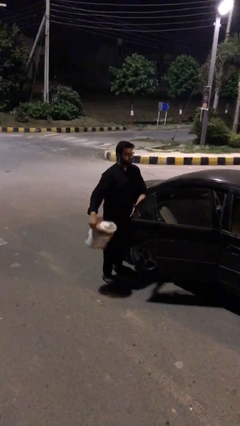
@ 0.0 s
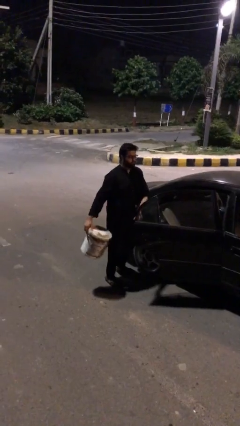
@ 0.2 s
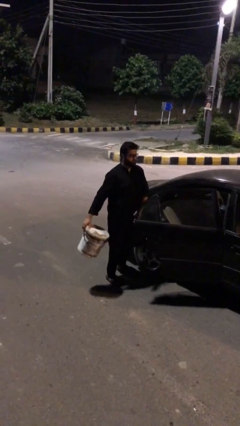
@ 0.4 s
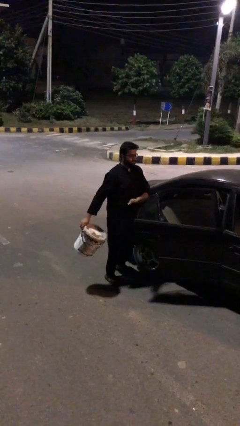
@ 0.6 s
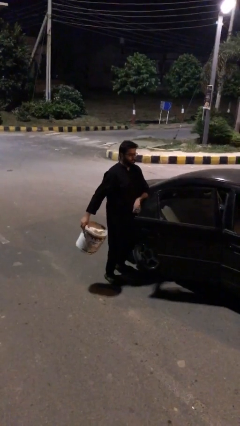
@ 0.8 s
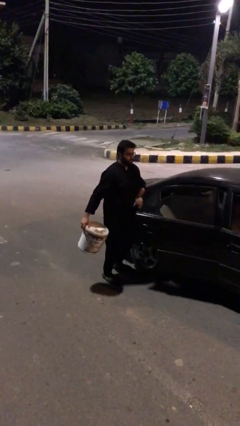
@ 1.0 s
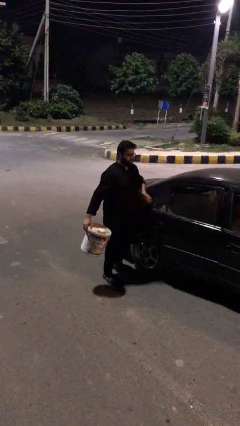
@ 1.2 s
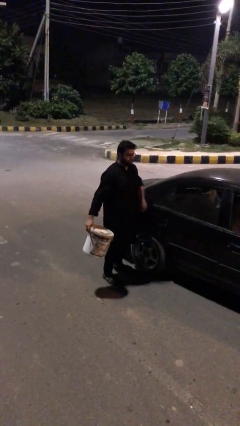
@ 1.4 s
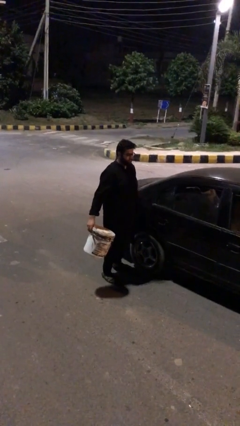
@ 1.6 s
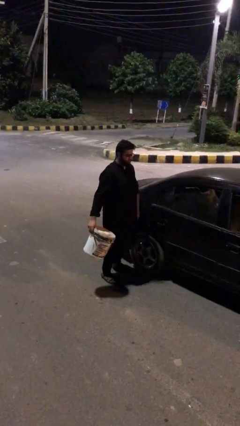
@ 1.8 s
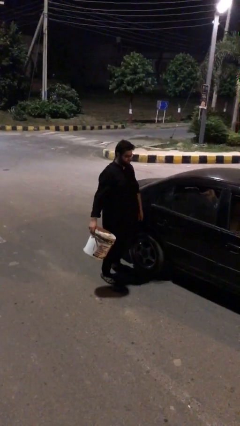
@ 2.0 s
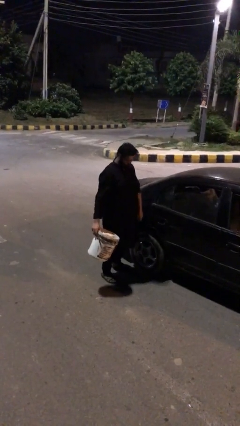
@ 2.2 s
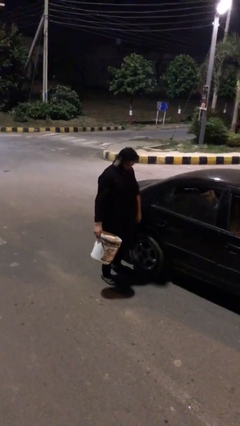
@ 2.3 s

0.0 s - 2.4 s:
person closes car door

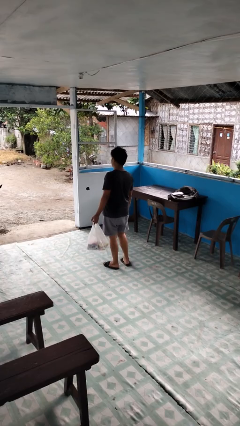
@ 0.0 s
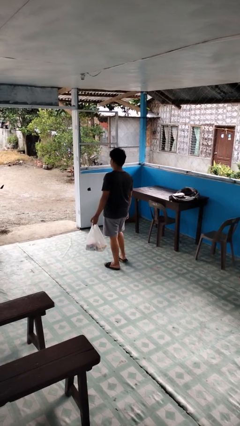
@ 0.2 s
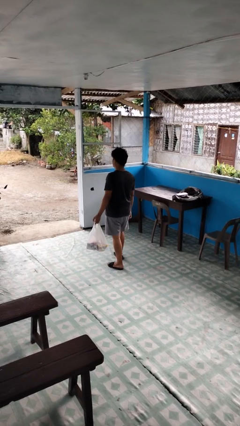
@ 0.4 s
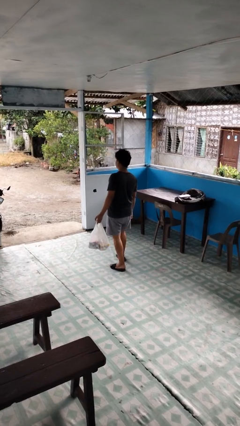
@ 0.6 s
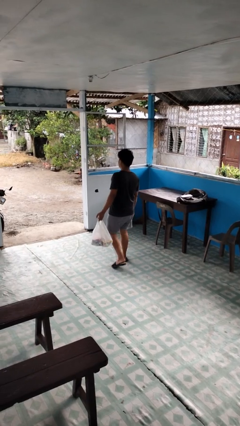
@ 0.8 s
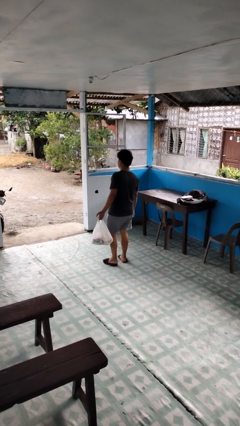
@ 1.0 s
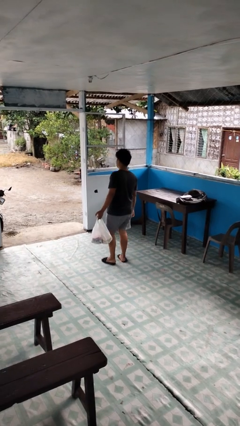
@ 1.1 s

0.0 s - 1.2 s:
person carries groceries

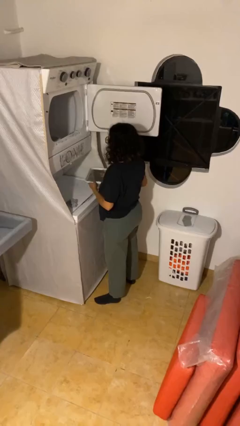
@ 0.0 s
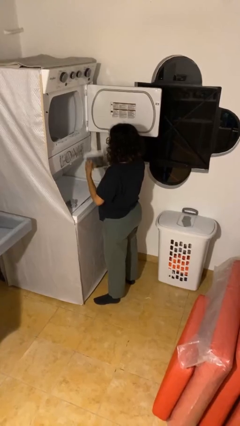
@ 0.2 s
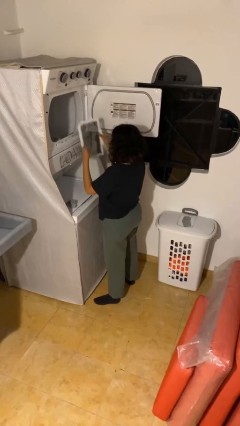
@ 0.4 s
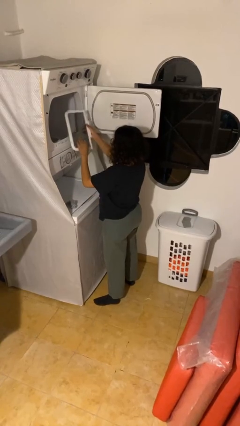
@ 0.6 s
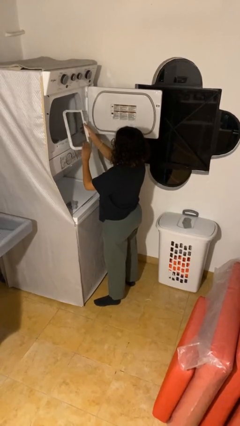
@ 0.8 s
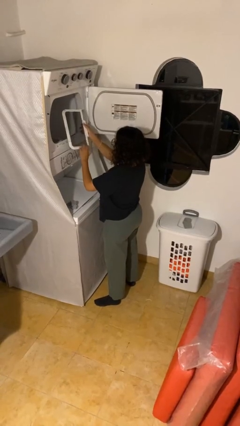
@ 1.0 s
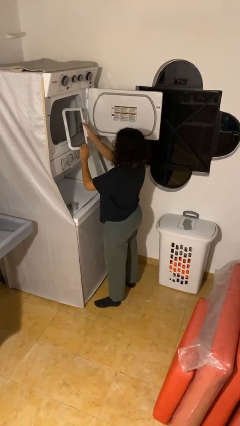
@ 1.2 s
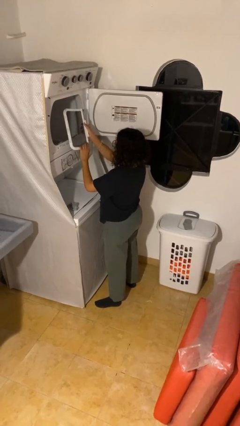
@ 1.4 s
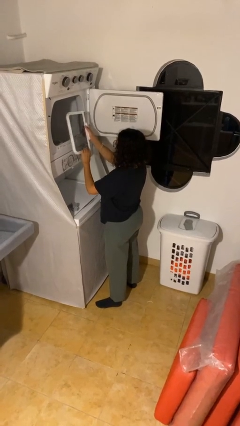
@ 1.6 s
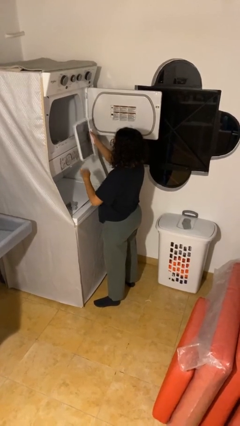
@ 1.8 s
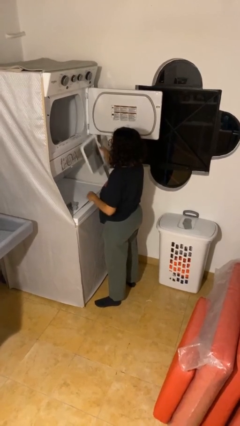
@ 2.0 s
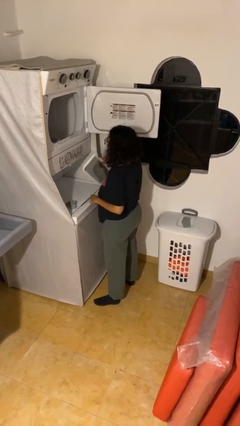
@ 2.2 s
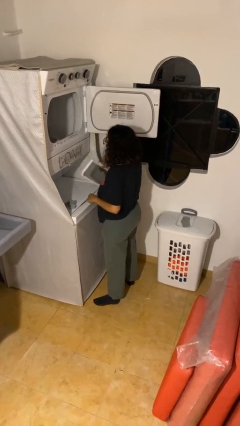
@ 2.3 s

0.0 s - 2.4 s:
person cleans dryer lint trap

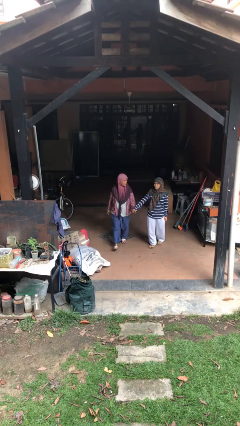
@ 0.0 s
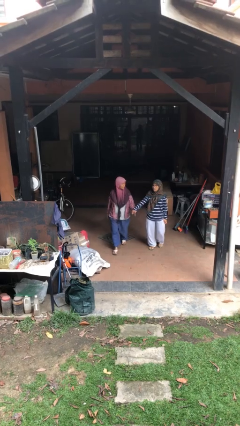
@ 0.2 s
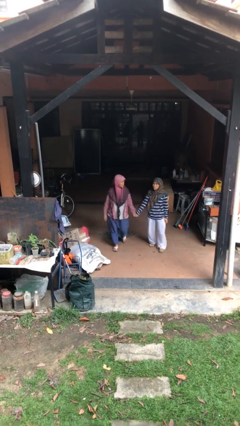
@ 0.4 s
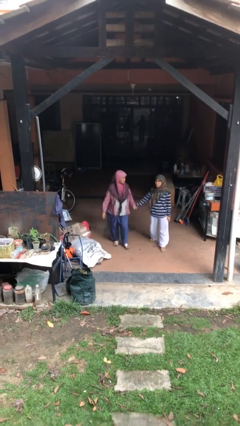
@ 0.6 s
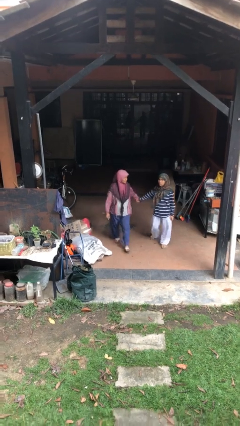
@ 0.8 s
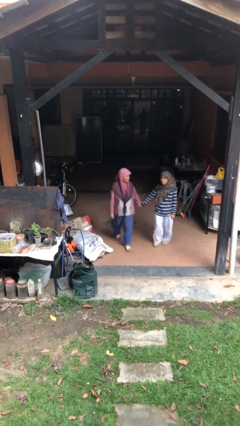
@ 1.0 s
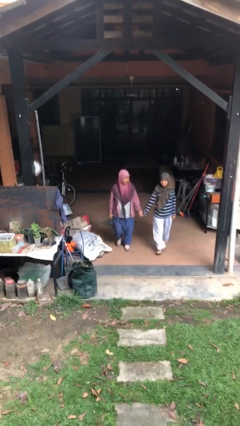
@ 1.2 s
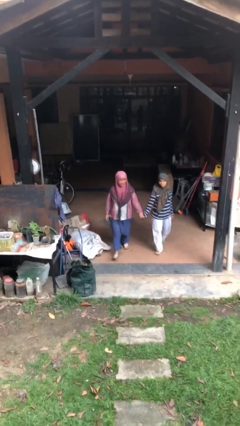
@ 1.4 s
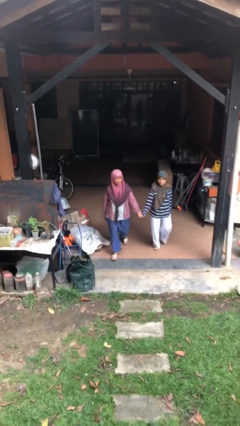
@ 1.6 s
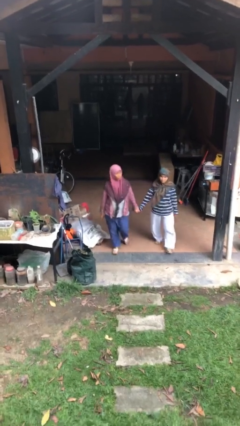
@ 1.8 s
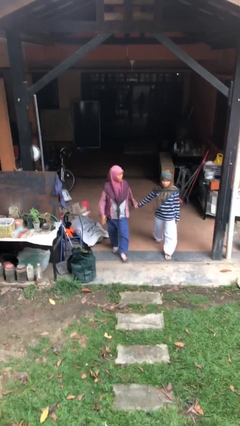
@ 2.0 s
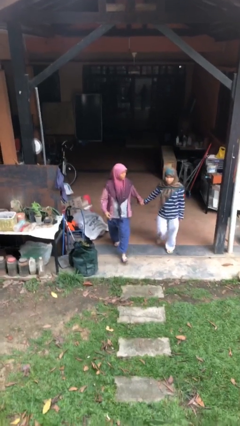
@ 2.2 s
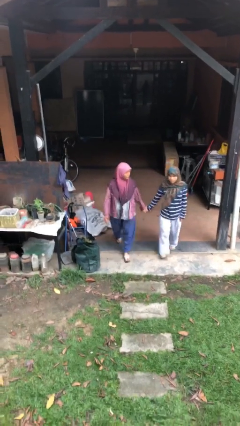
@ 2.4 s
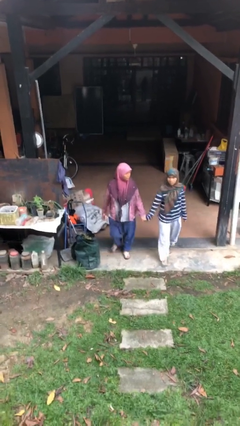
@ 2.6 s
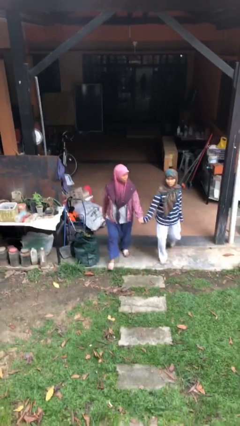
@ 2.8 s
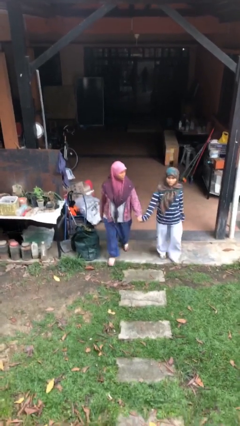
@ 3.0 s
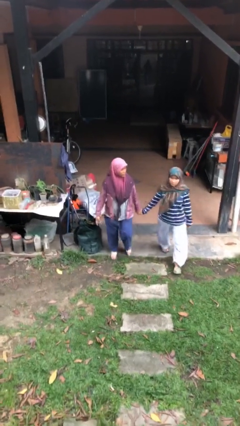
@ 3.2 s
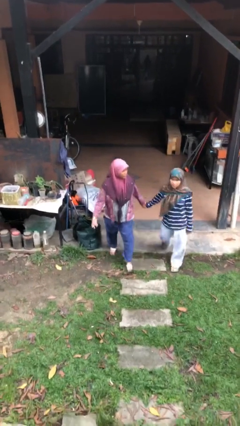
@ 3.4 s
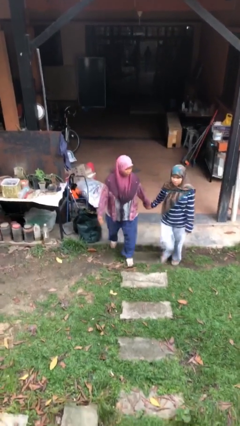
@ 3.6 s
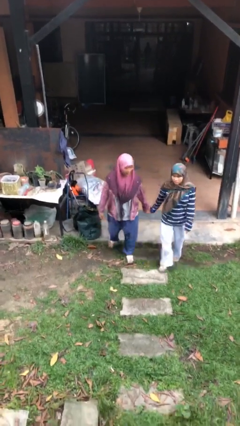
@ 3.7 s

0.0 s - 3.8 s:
person holds hand

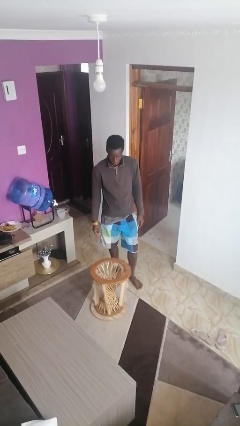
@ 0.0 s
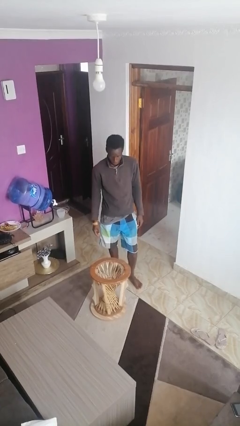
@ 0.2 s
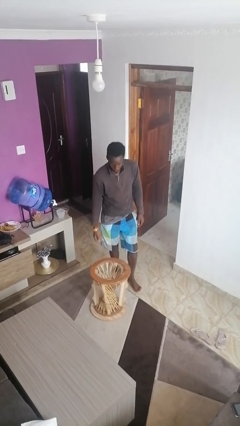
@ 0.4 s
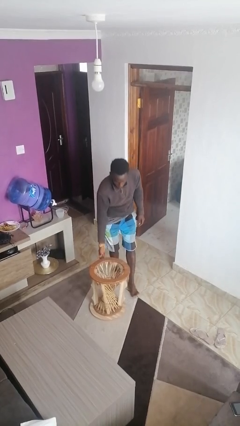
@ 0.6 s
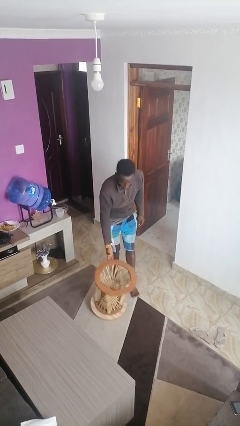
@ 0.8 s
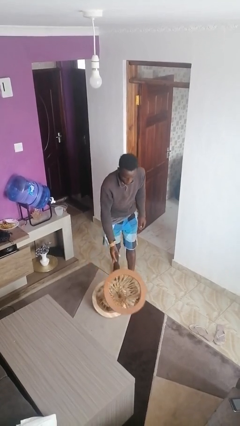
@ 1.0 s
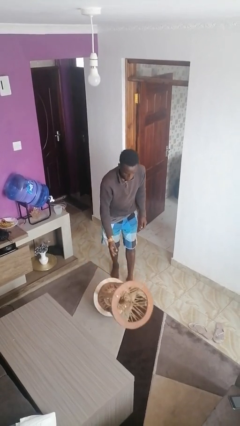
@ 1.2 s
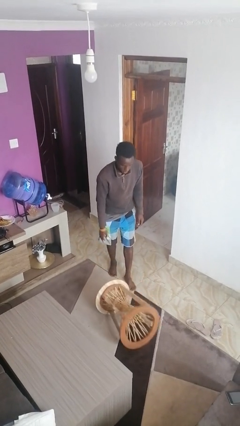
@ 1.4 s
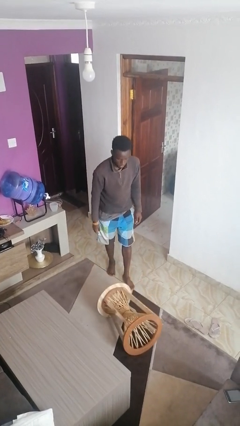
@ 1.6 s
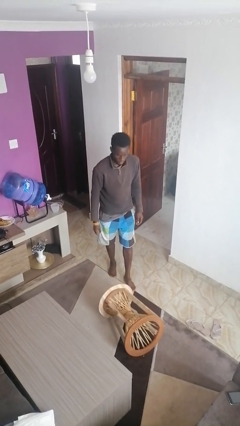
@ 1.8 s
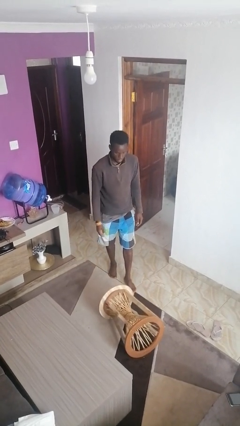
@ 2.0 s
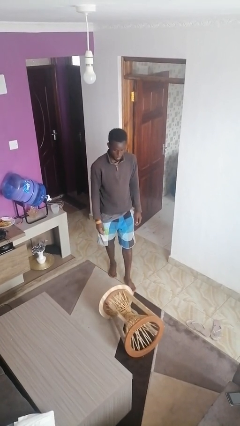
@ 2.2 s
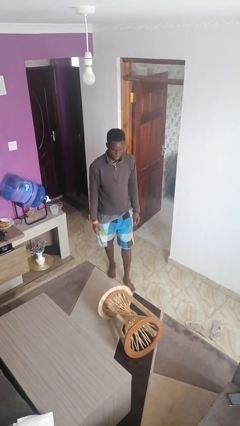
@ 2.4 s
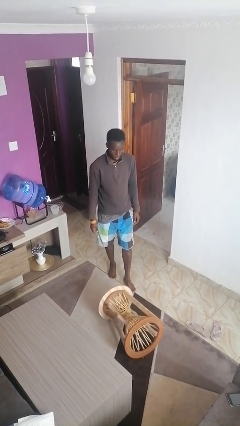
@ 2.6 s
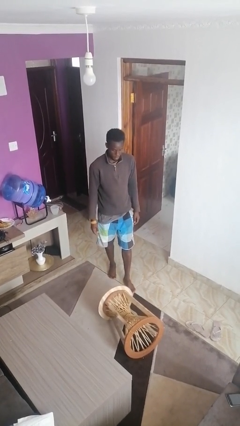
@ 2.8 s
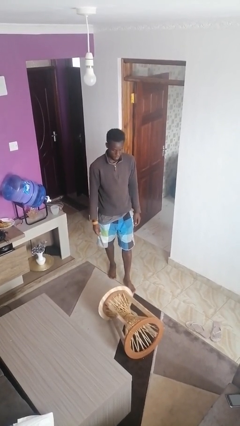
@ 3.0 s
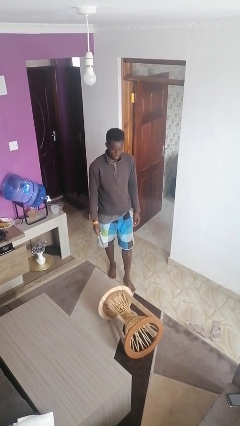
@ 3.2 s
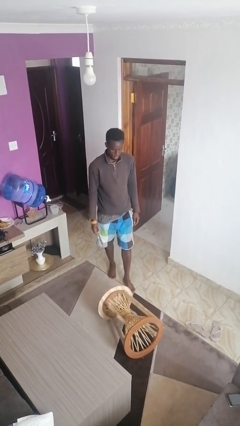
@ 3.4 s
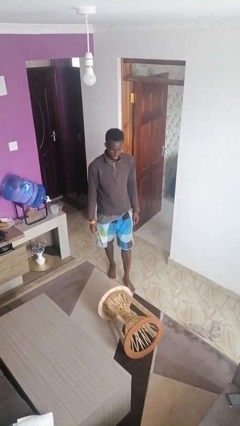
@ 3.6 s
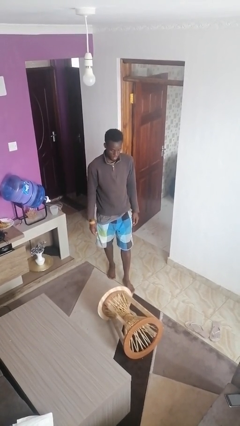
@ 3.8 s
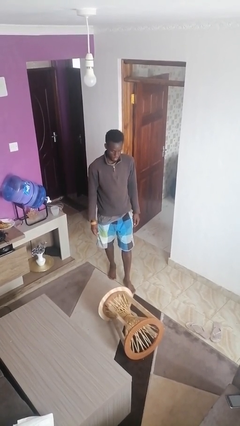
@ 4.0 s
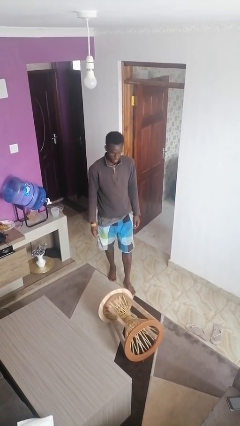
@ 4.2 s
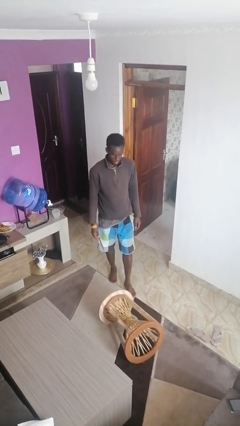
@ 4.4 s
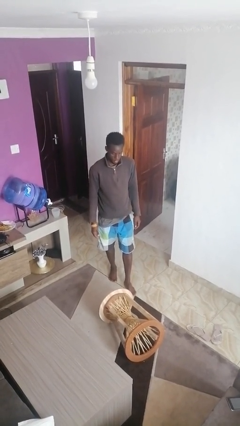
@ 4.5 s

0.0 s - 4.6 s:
person knocks over furniture

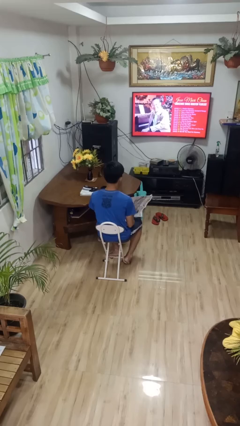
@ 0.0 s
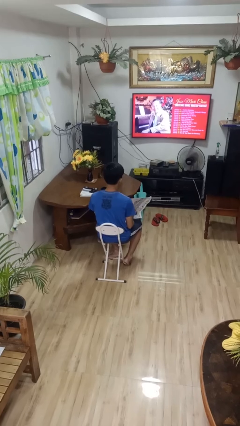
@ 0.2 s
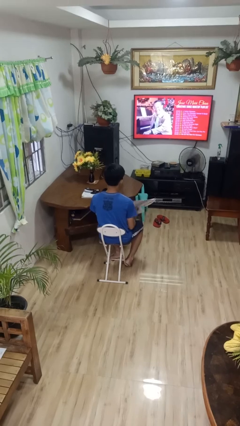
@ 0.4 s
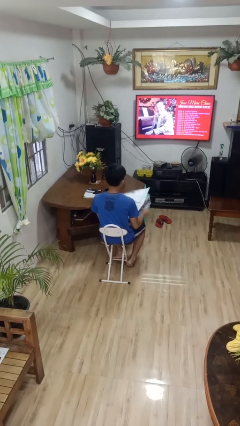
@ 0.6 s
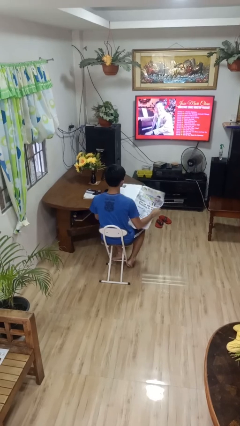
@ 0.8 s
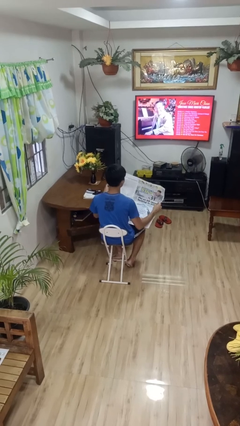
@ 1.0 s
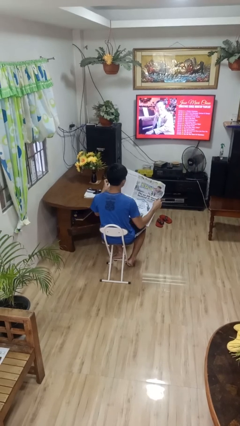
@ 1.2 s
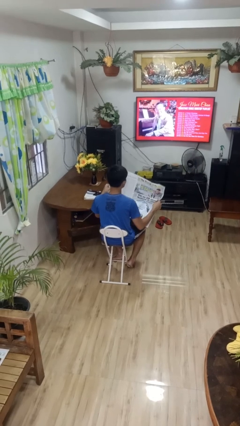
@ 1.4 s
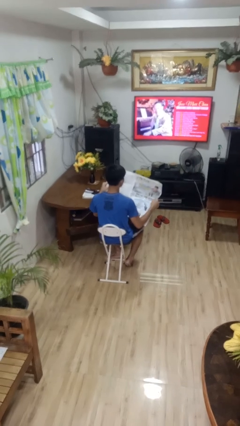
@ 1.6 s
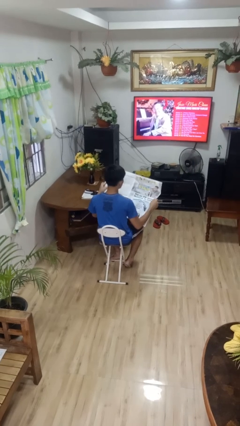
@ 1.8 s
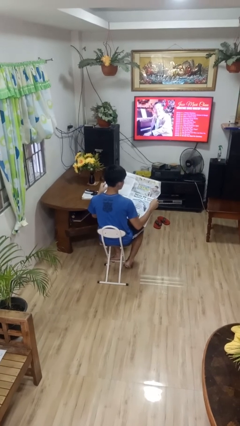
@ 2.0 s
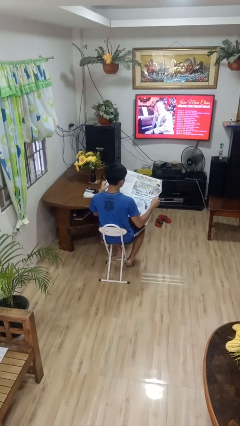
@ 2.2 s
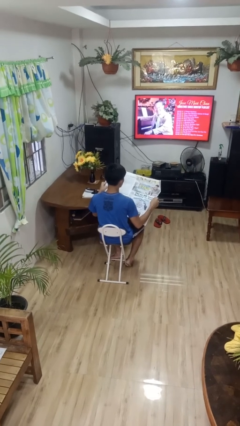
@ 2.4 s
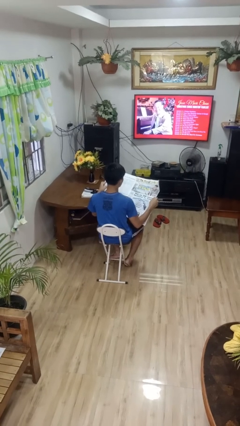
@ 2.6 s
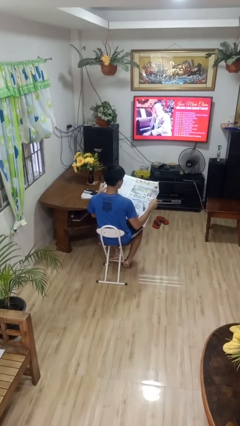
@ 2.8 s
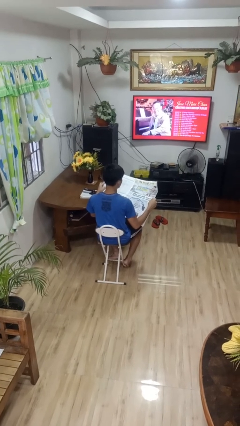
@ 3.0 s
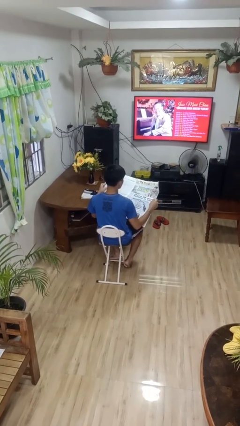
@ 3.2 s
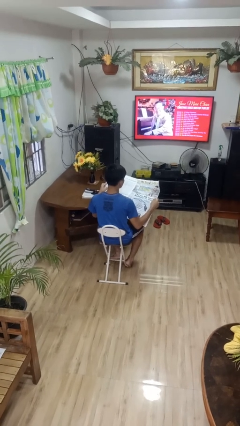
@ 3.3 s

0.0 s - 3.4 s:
person reads newspaper
